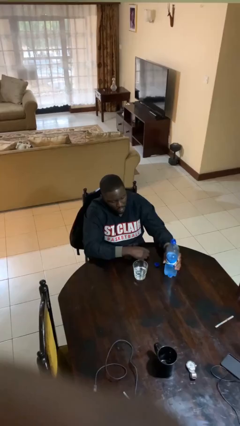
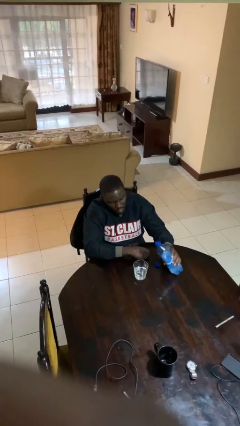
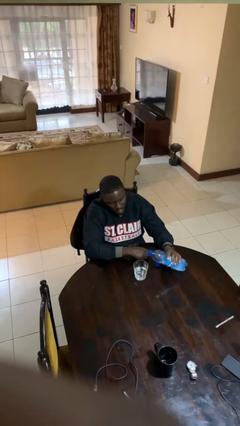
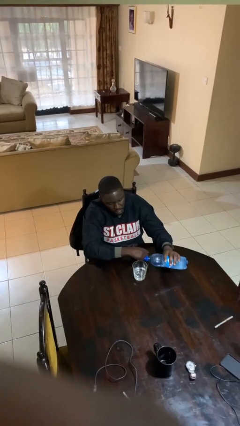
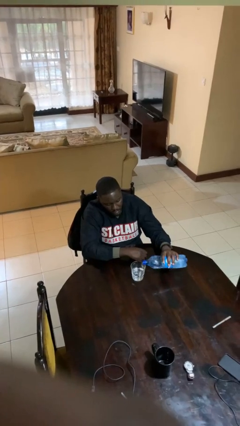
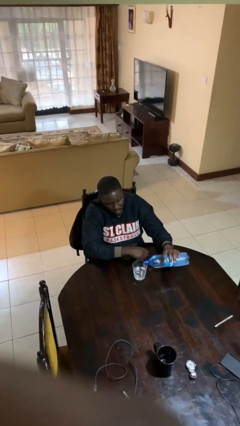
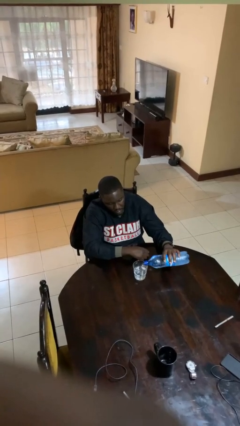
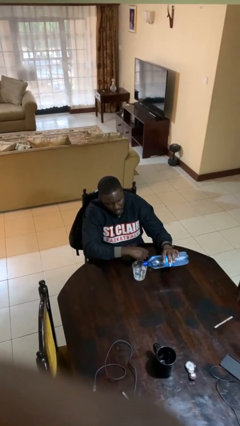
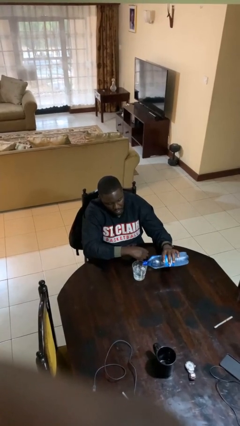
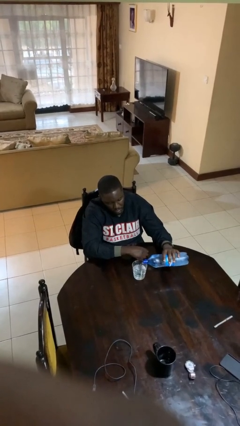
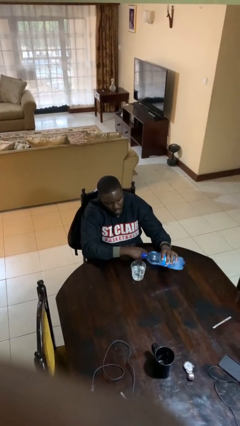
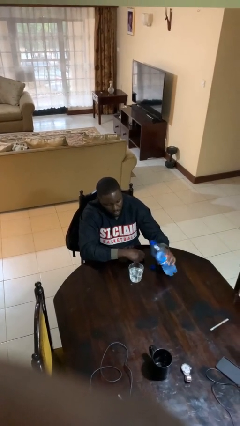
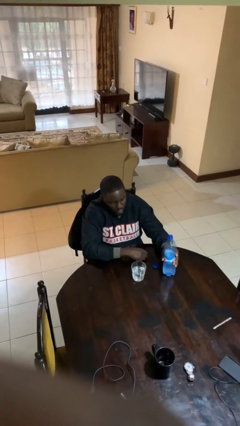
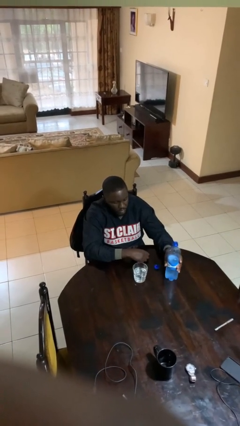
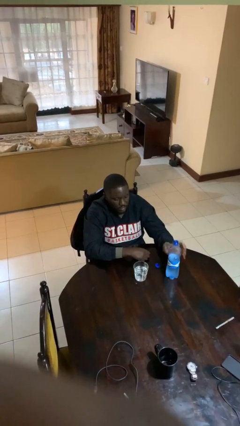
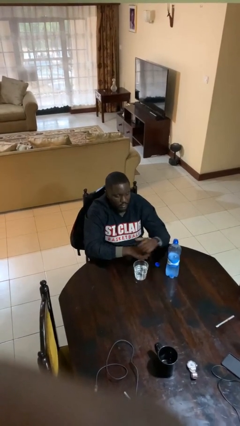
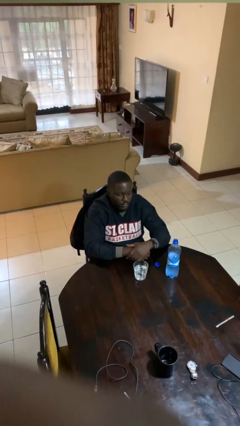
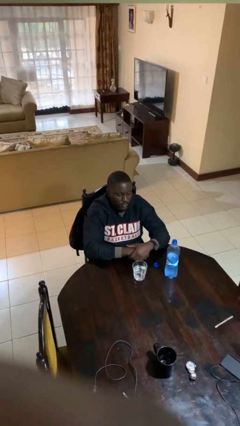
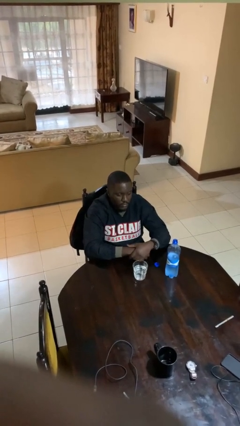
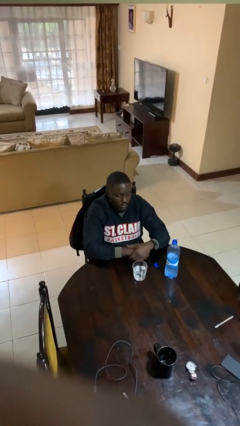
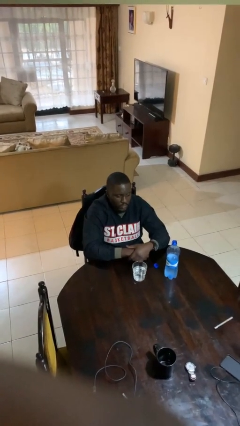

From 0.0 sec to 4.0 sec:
person pours liquid into cup

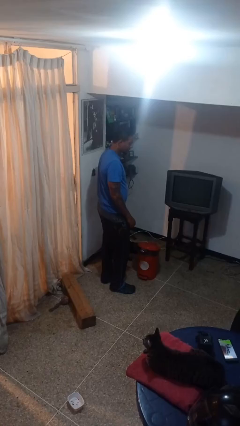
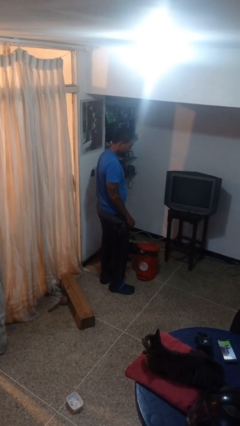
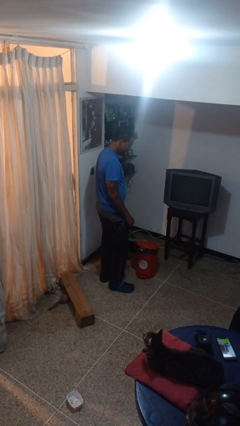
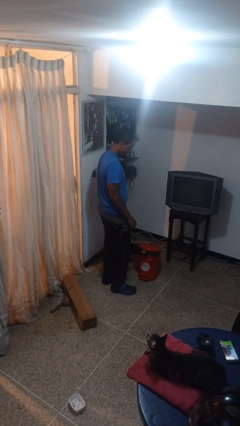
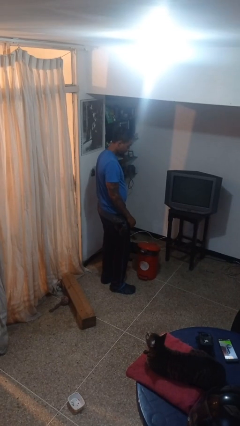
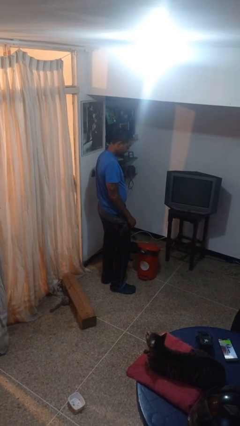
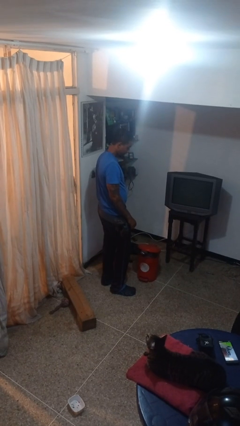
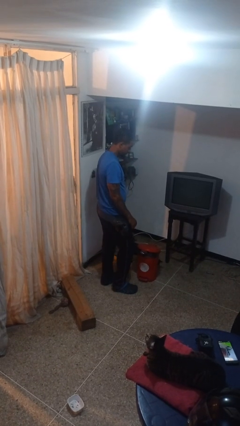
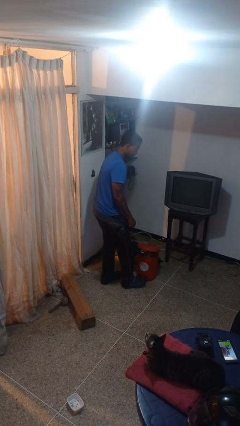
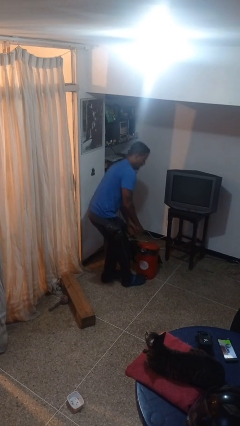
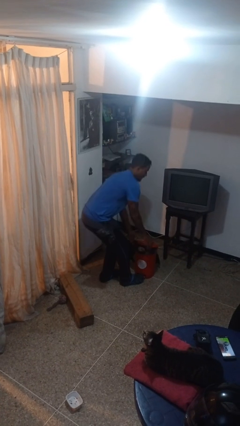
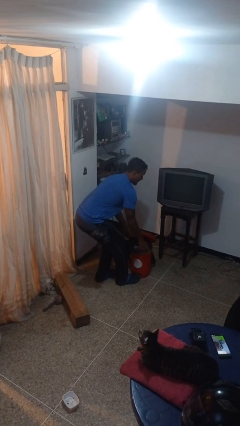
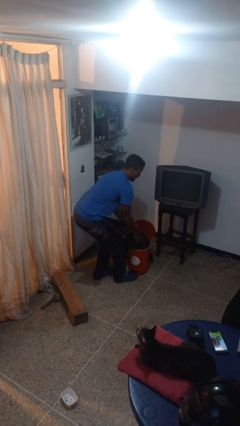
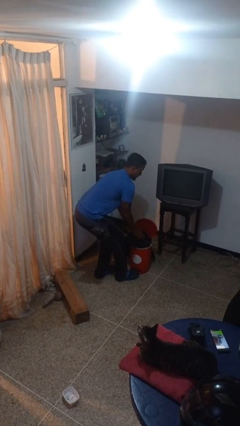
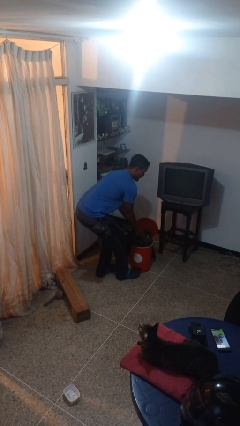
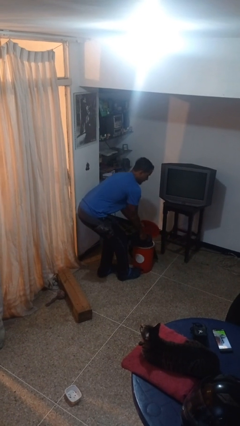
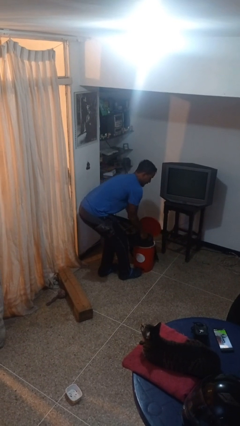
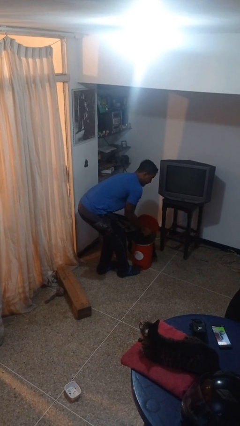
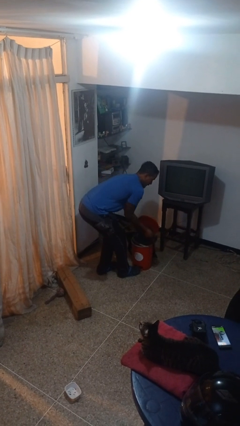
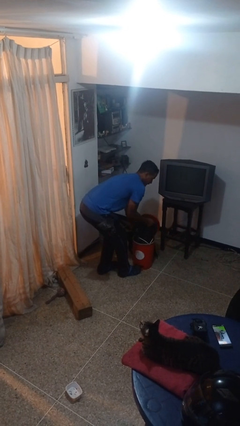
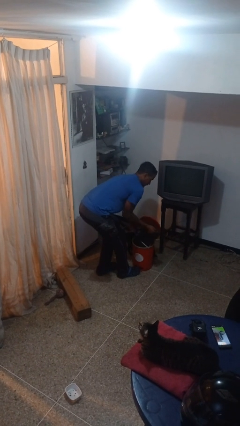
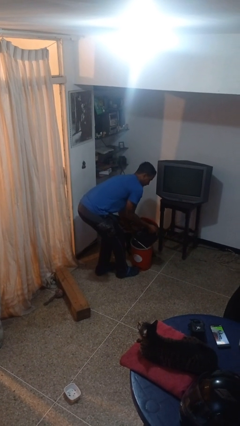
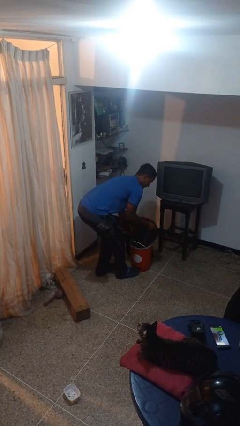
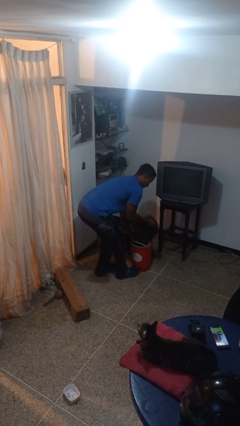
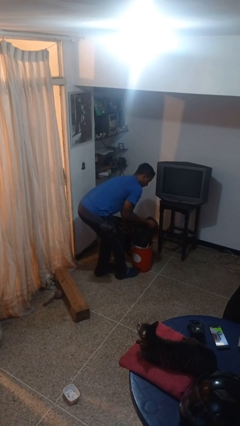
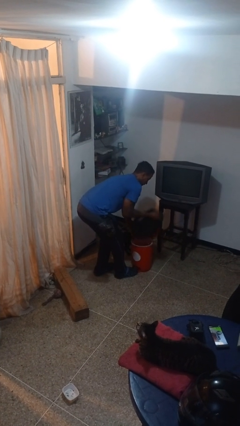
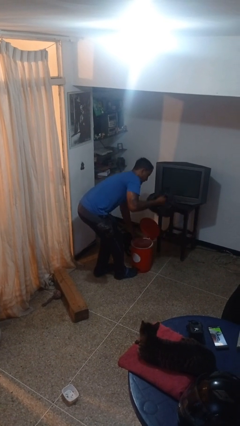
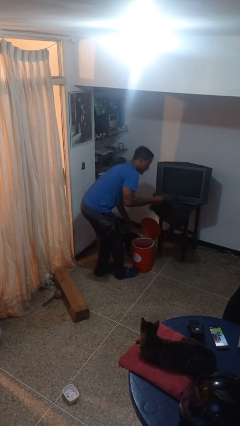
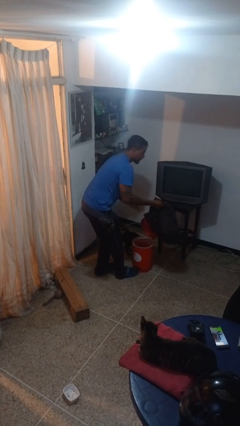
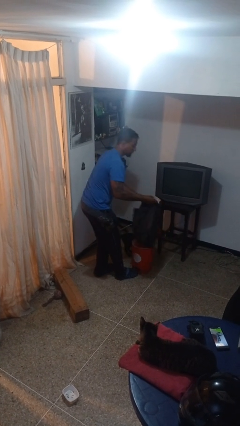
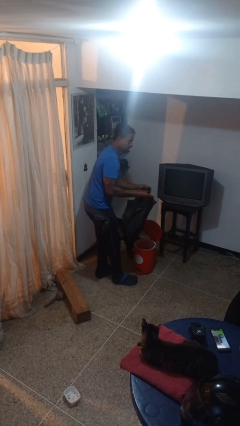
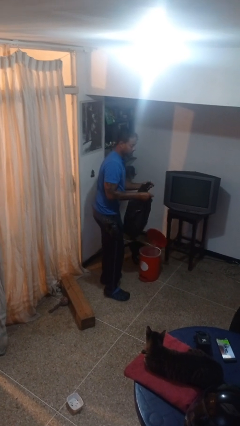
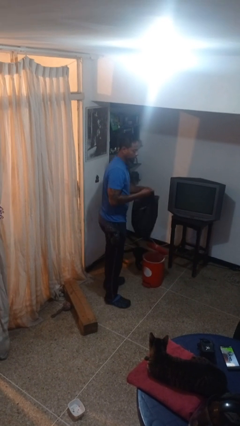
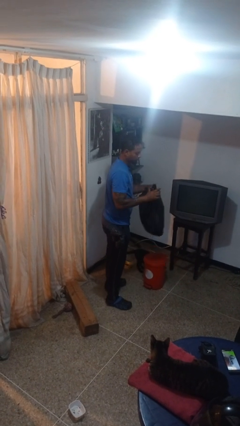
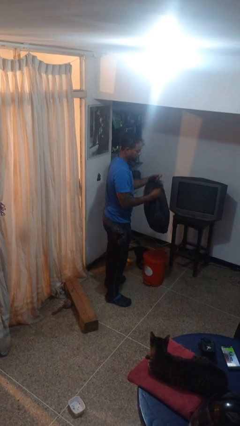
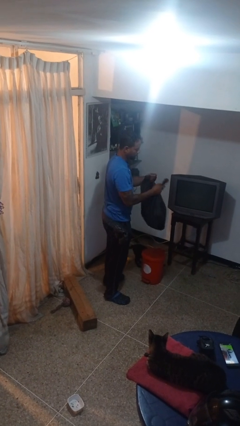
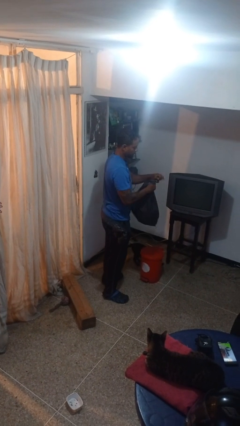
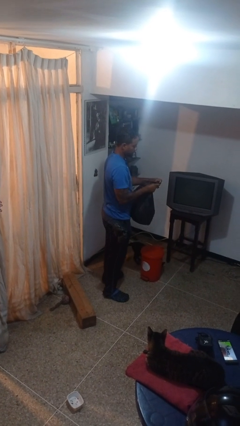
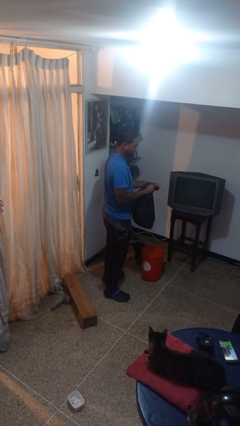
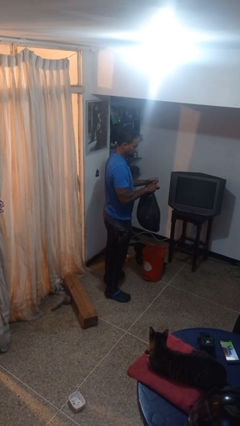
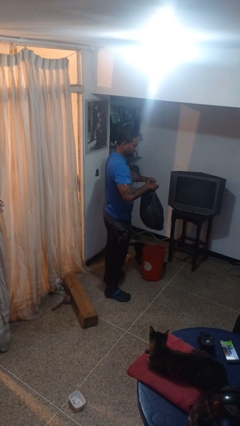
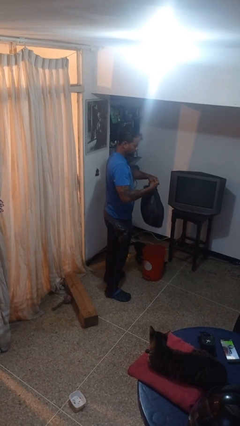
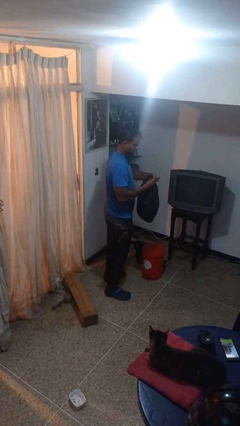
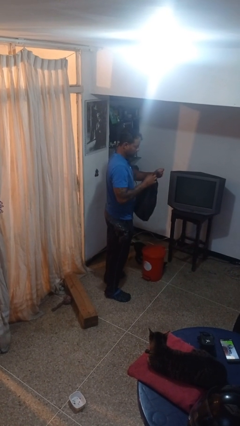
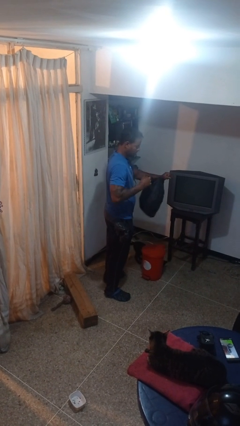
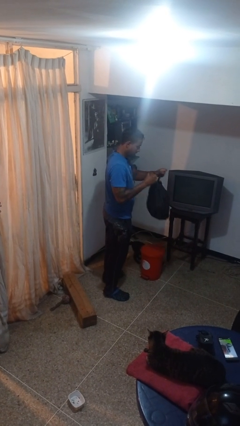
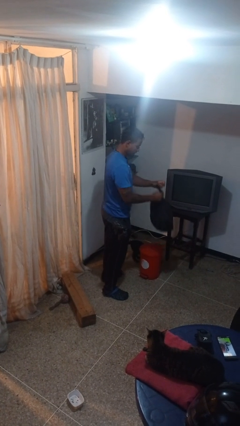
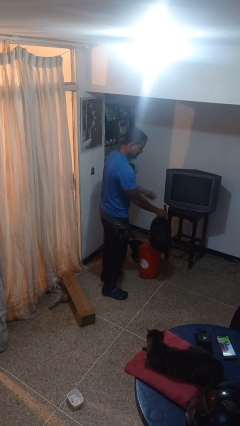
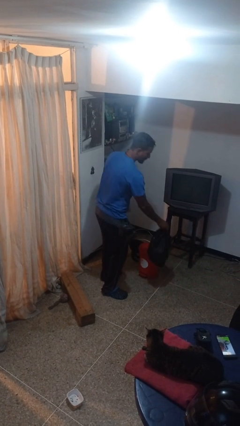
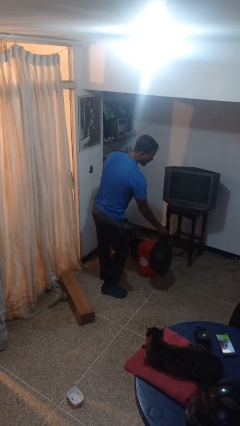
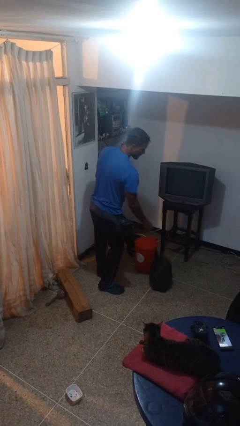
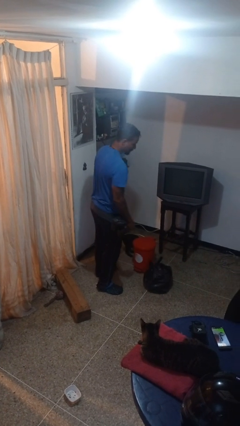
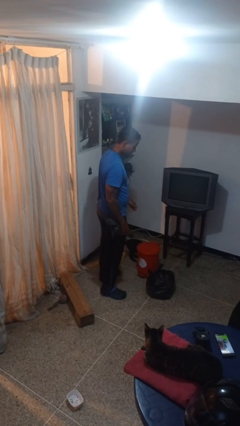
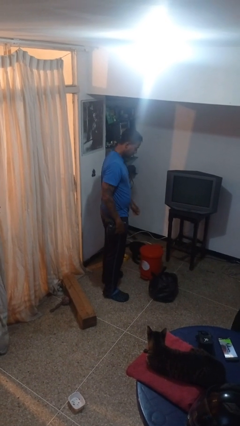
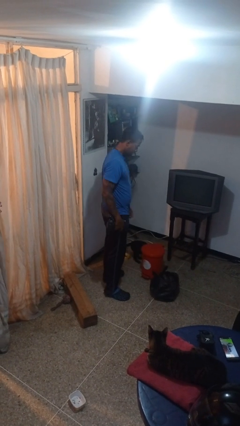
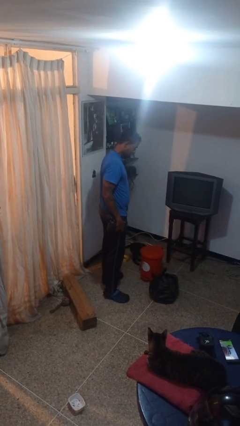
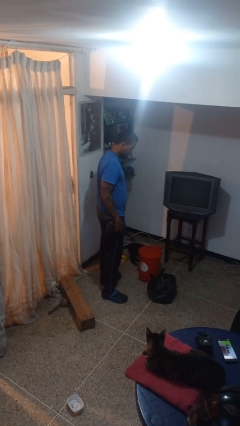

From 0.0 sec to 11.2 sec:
person removes trashbag from trashcan

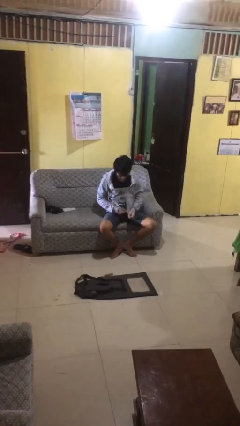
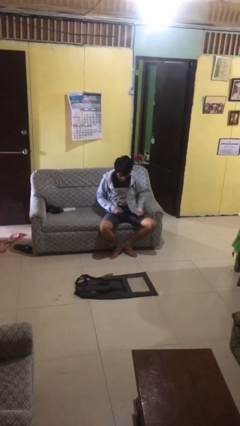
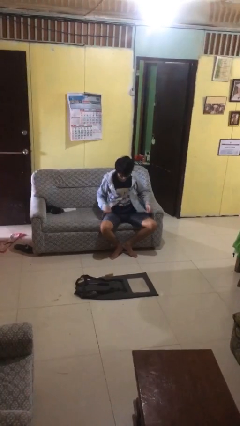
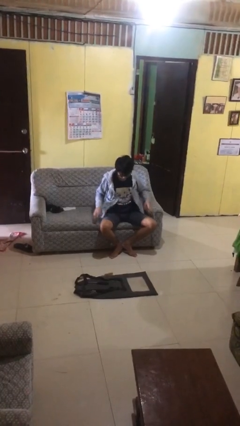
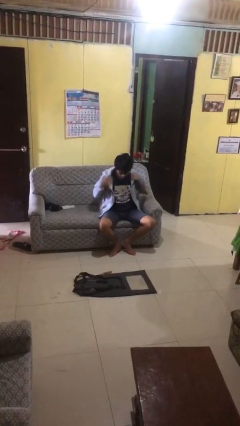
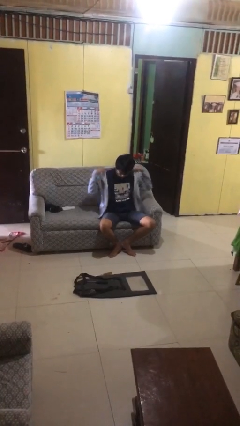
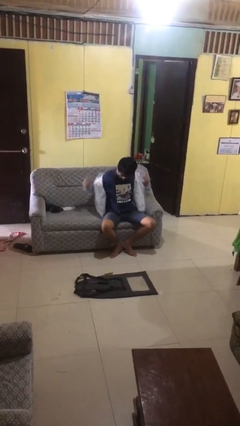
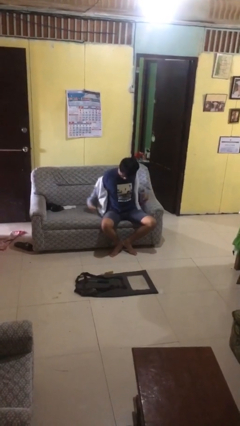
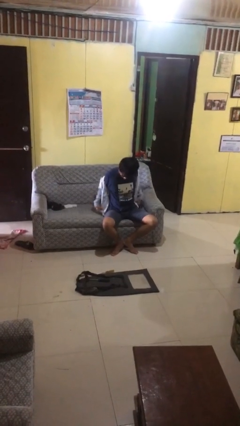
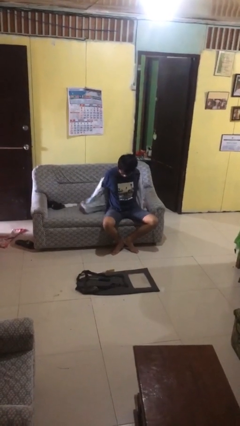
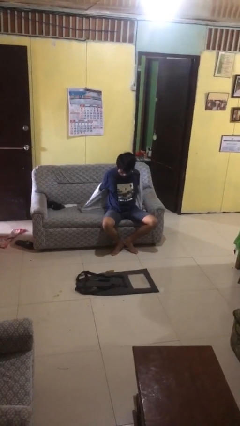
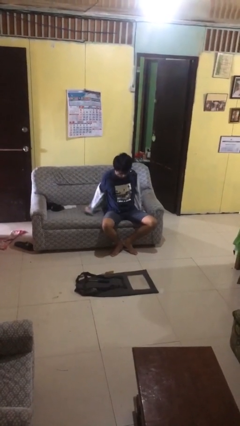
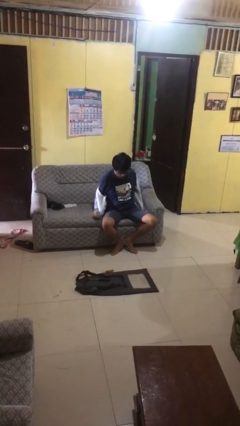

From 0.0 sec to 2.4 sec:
person takes off jacket

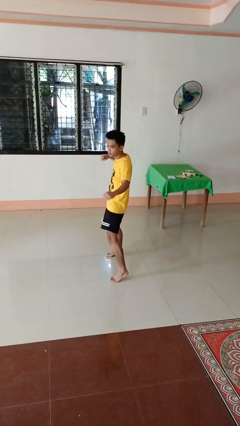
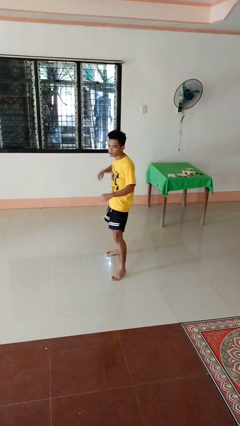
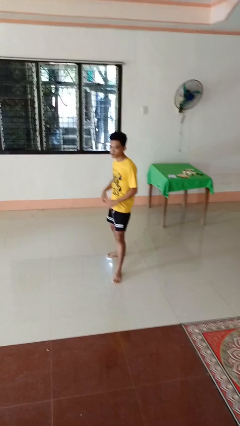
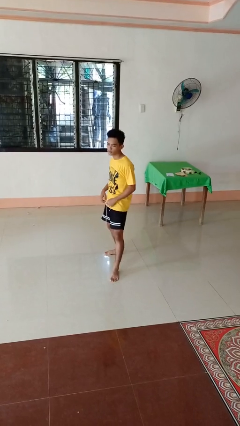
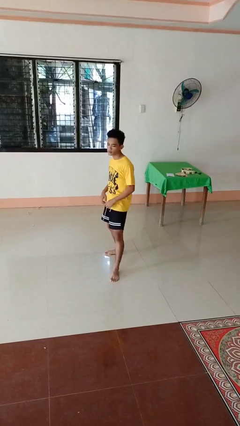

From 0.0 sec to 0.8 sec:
person karate chop
